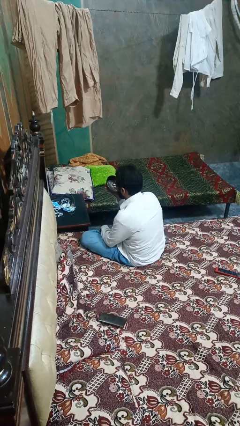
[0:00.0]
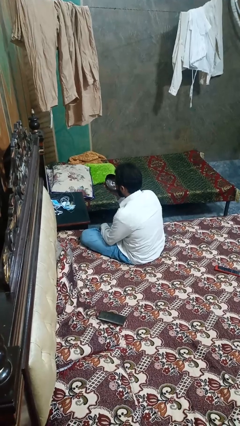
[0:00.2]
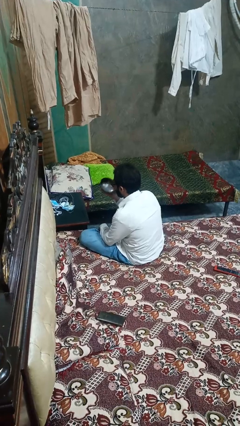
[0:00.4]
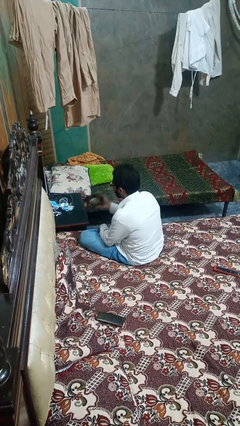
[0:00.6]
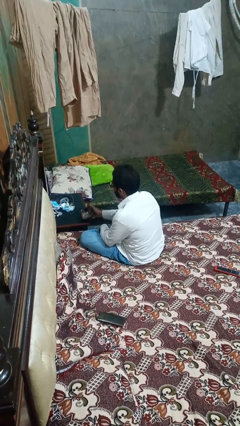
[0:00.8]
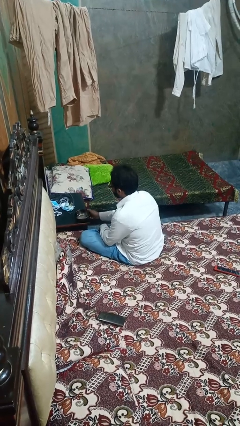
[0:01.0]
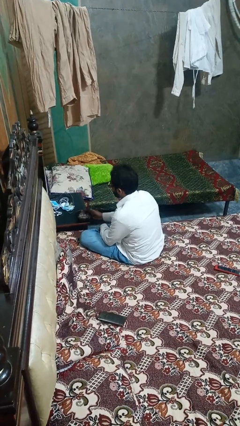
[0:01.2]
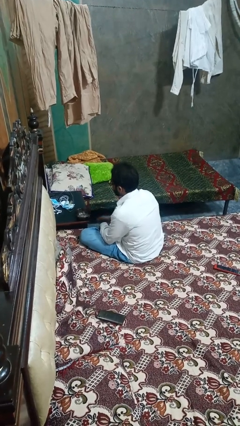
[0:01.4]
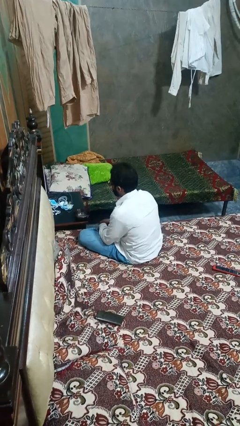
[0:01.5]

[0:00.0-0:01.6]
person puts down object on table

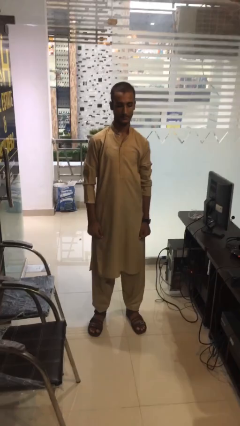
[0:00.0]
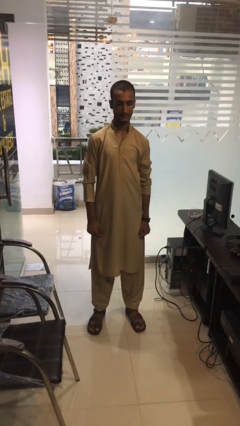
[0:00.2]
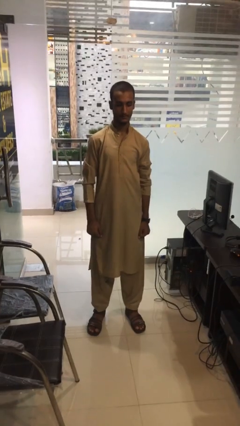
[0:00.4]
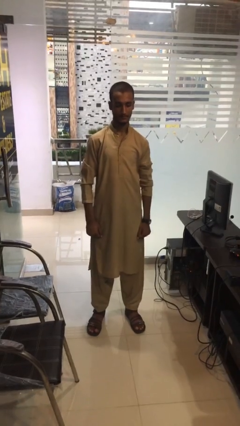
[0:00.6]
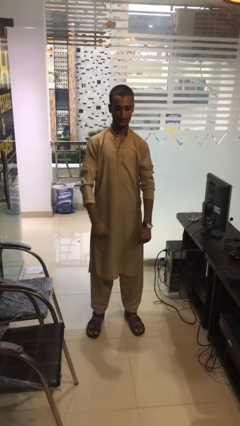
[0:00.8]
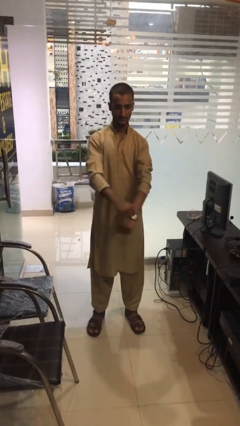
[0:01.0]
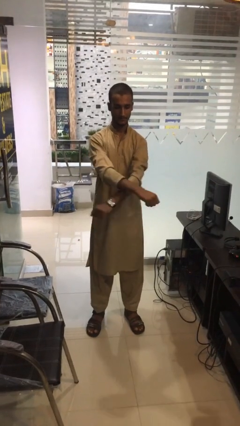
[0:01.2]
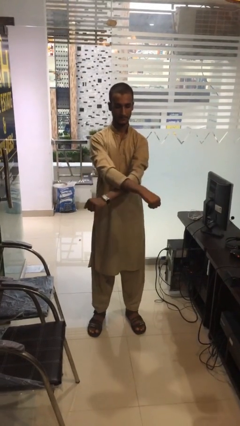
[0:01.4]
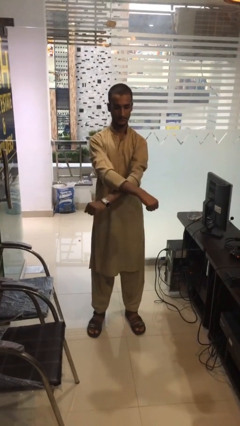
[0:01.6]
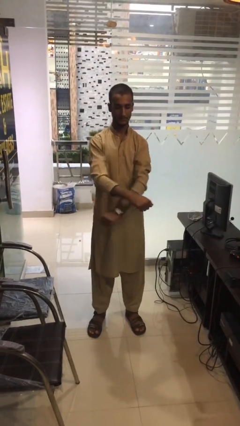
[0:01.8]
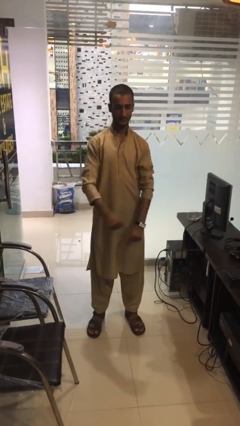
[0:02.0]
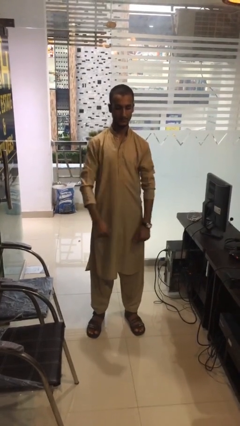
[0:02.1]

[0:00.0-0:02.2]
person gestures arms x

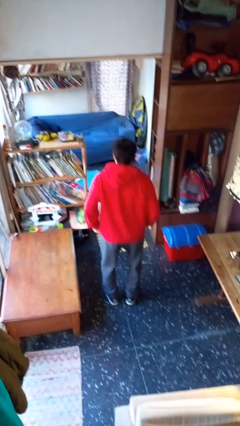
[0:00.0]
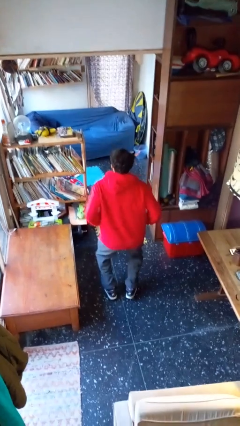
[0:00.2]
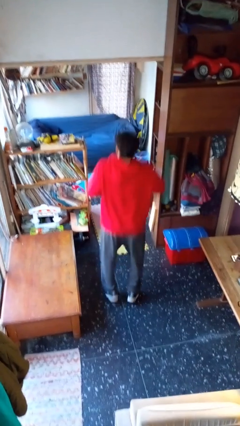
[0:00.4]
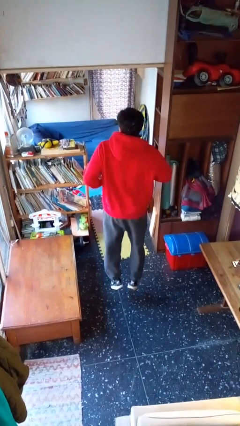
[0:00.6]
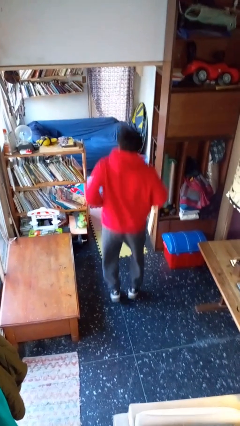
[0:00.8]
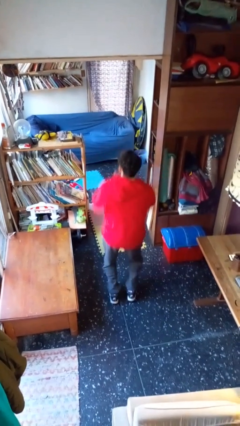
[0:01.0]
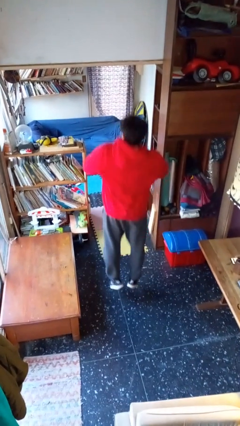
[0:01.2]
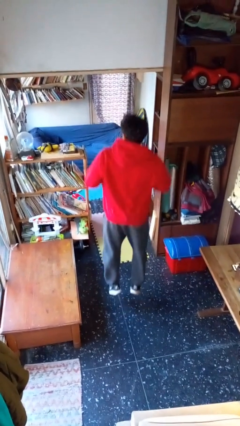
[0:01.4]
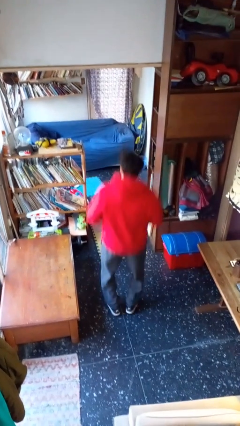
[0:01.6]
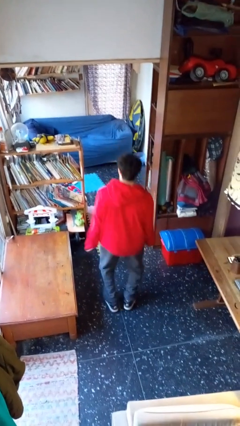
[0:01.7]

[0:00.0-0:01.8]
person jumps

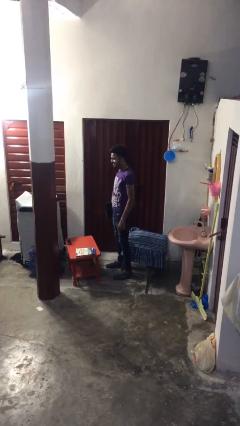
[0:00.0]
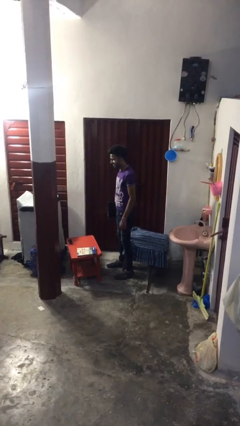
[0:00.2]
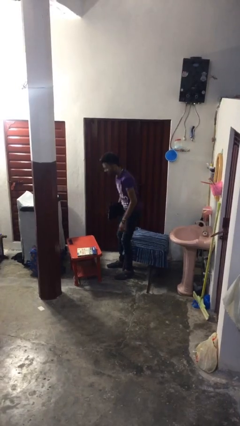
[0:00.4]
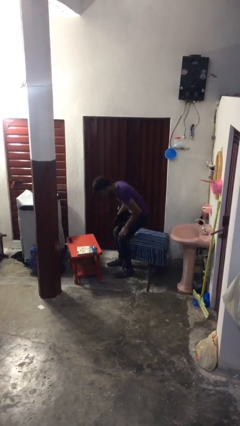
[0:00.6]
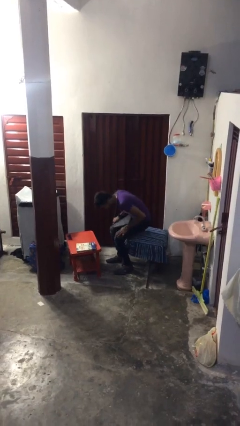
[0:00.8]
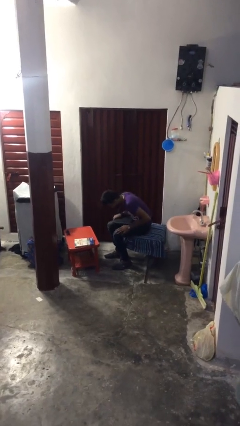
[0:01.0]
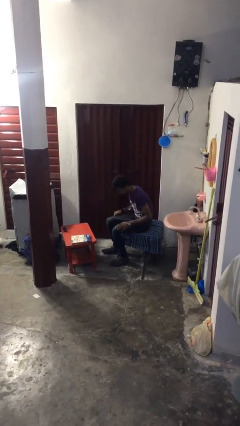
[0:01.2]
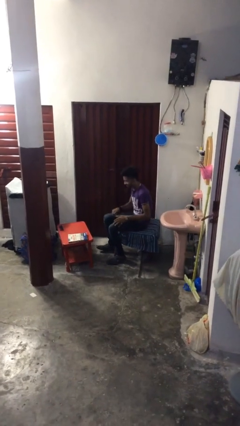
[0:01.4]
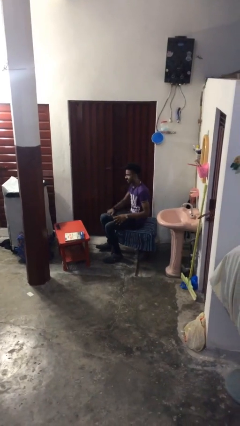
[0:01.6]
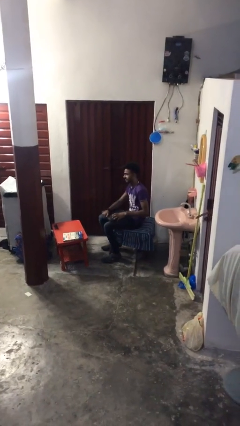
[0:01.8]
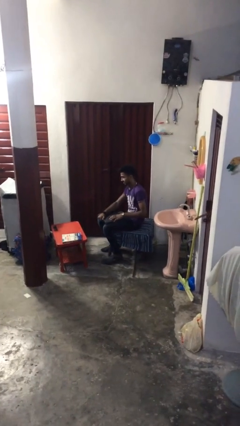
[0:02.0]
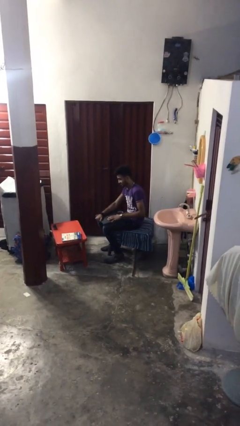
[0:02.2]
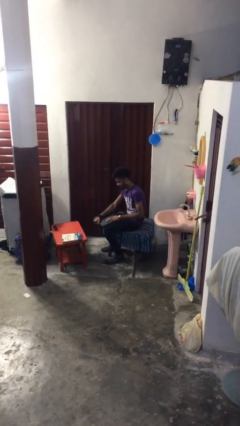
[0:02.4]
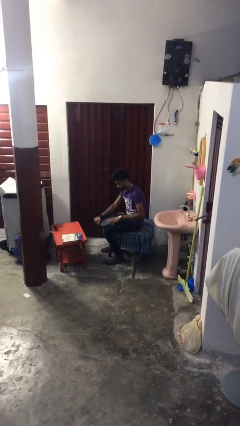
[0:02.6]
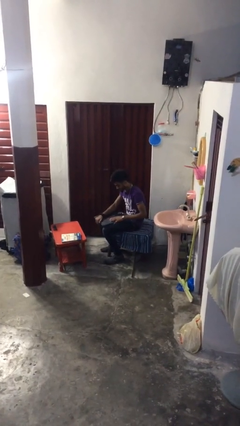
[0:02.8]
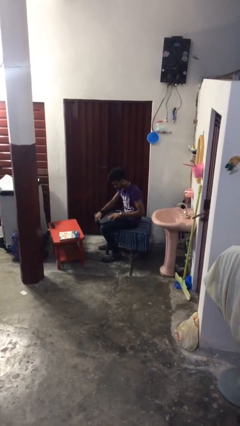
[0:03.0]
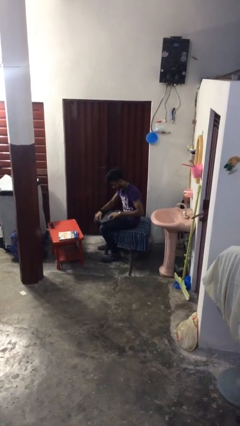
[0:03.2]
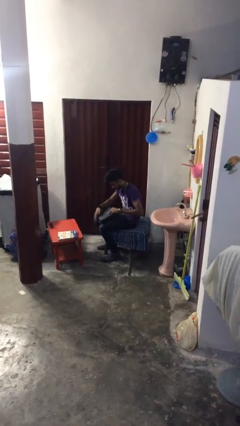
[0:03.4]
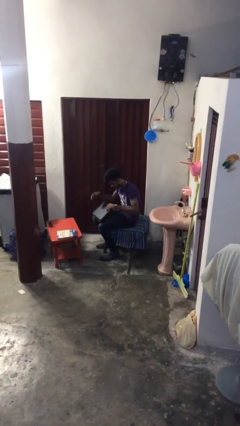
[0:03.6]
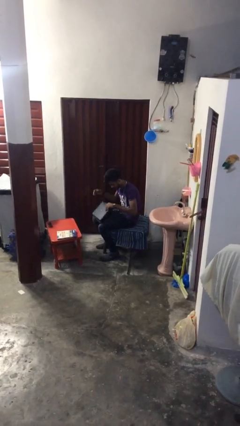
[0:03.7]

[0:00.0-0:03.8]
person sits down

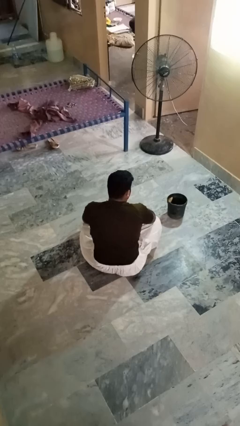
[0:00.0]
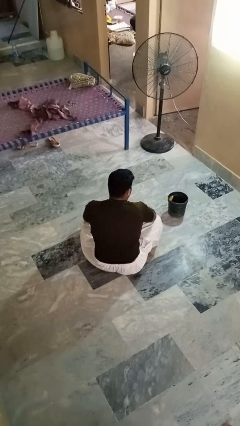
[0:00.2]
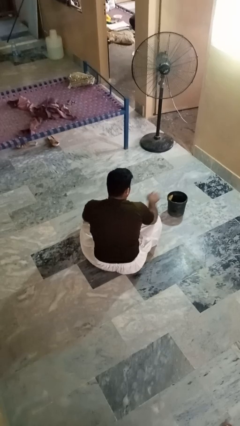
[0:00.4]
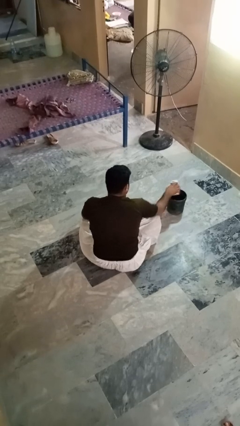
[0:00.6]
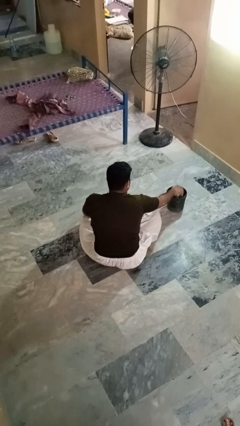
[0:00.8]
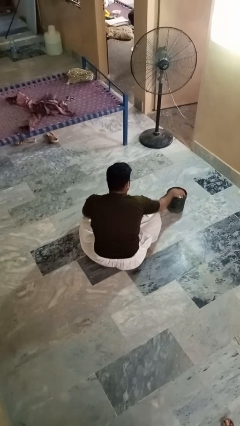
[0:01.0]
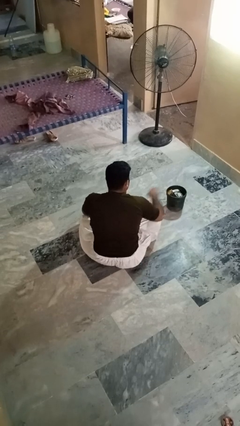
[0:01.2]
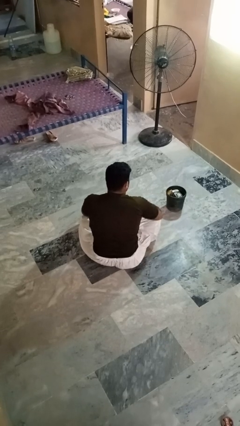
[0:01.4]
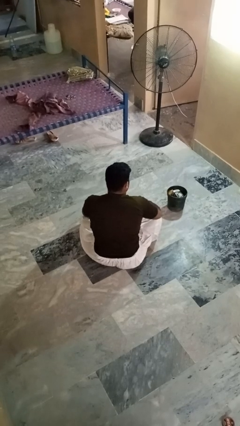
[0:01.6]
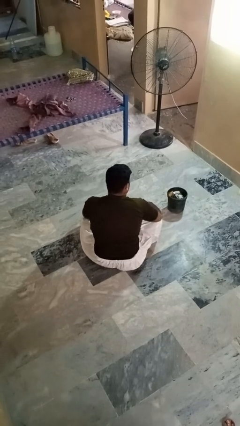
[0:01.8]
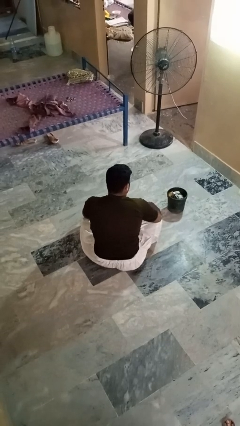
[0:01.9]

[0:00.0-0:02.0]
person puts object into basket

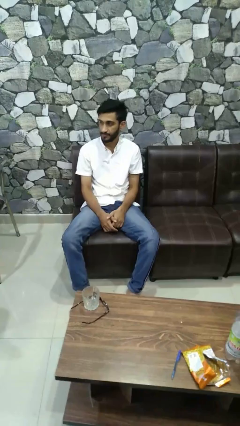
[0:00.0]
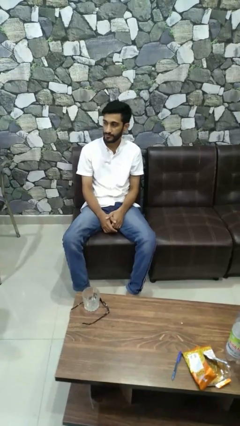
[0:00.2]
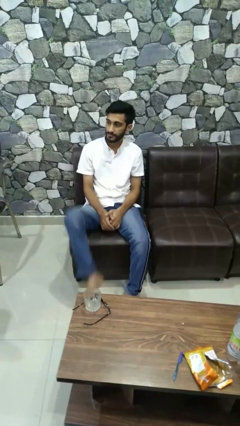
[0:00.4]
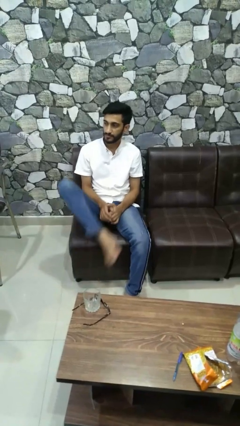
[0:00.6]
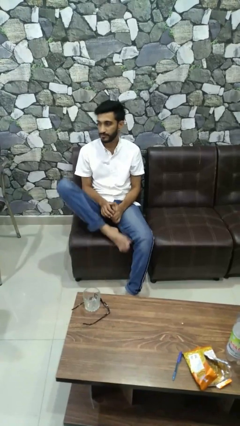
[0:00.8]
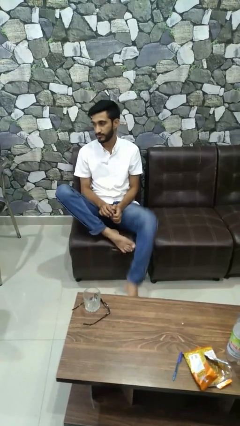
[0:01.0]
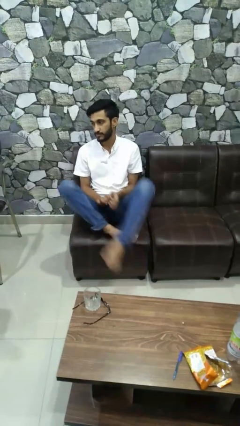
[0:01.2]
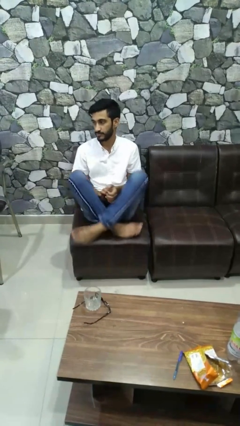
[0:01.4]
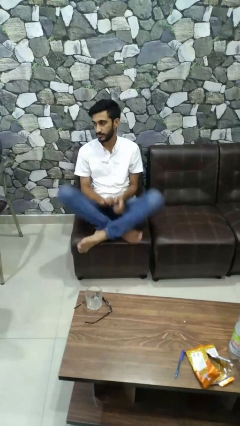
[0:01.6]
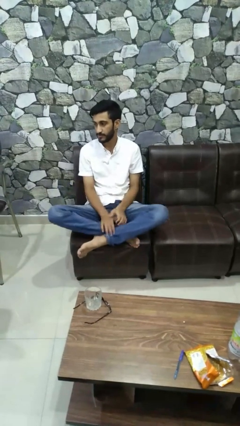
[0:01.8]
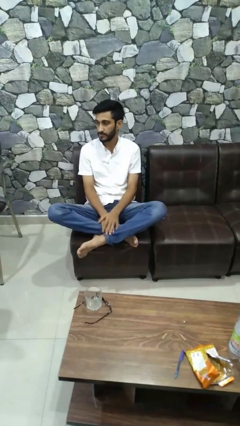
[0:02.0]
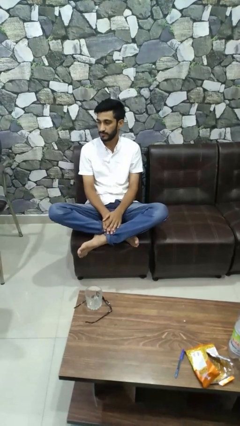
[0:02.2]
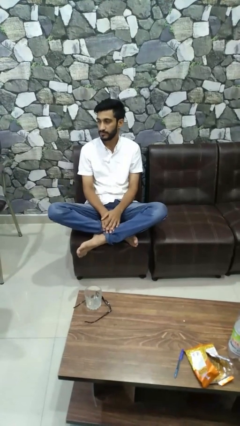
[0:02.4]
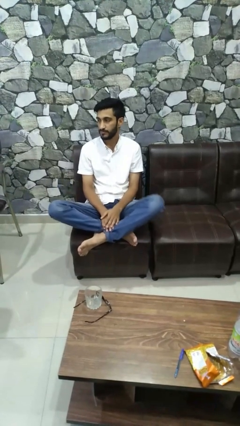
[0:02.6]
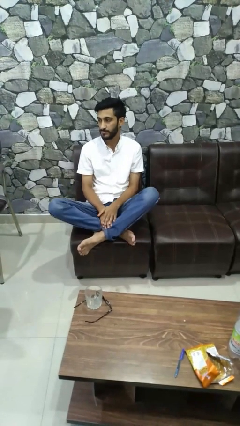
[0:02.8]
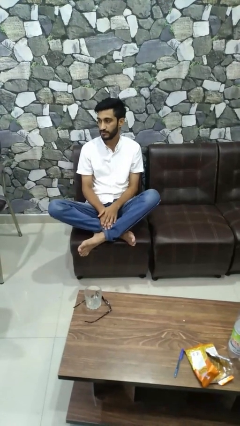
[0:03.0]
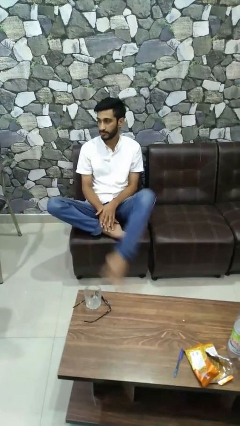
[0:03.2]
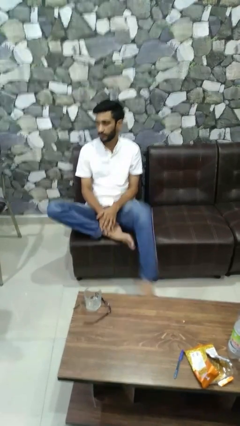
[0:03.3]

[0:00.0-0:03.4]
person crosses legs

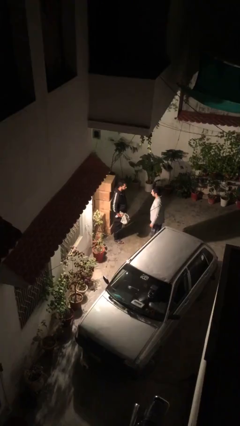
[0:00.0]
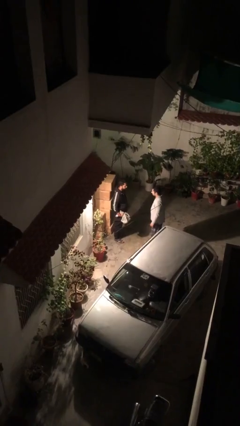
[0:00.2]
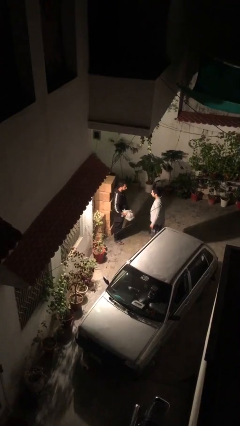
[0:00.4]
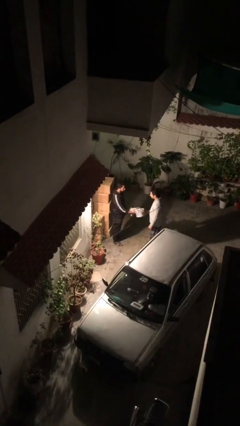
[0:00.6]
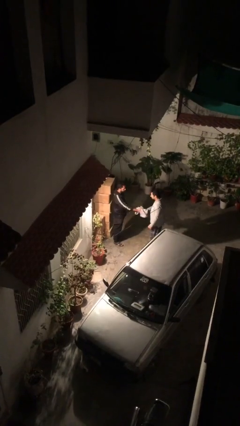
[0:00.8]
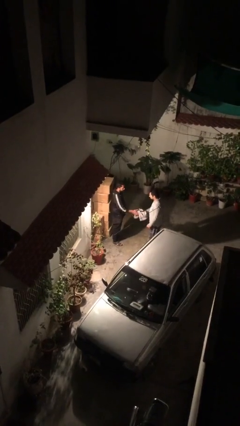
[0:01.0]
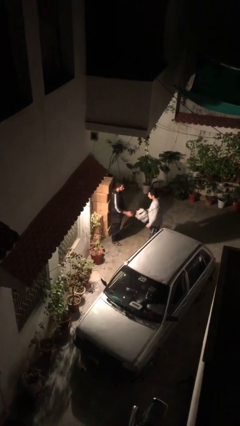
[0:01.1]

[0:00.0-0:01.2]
person transfers object to person

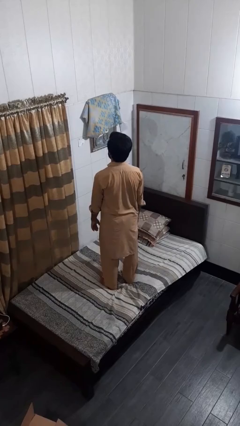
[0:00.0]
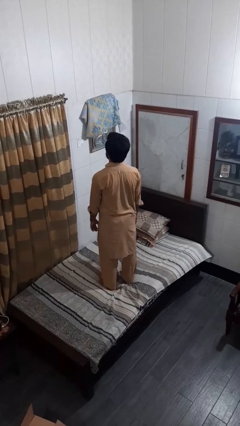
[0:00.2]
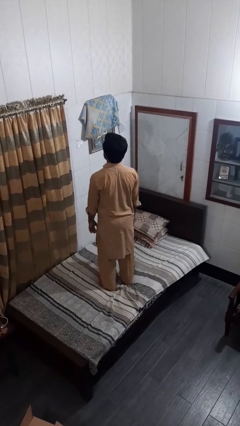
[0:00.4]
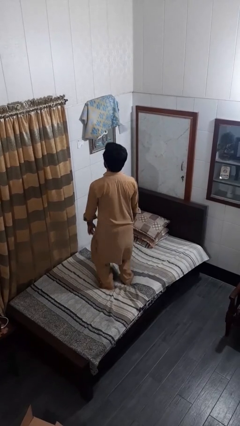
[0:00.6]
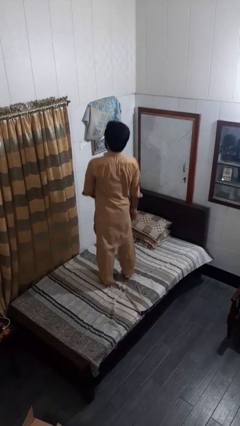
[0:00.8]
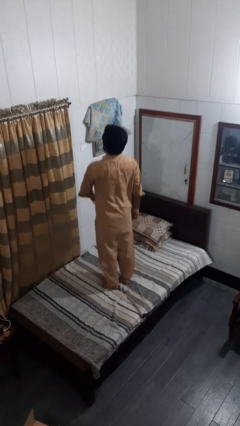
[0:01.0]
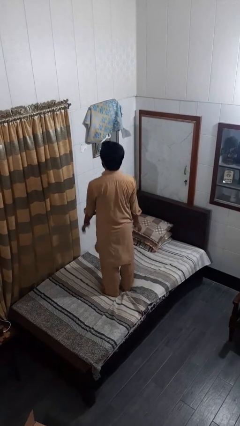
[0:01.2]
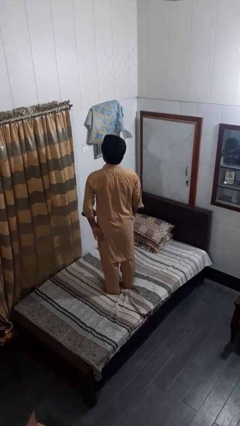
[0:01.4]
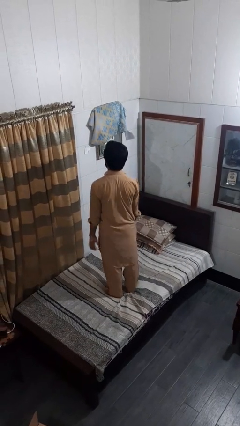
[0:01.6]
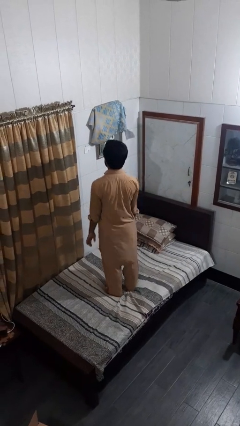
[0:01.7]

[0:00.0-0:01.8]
person jumps on bed
